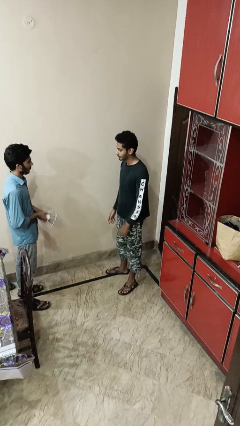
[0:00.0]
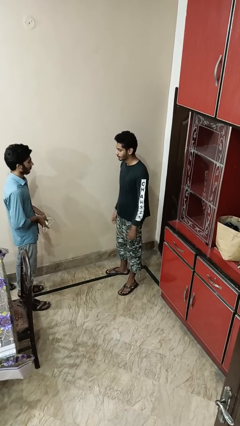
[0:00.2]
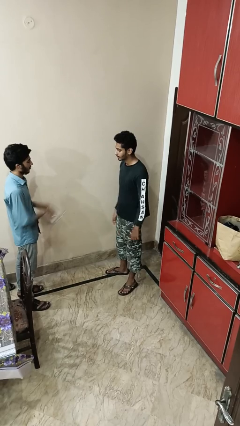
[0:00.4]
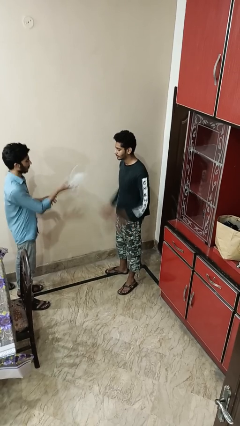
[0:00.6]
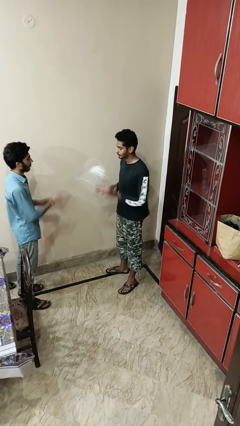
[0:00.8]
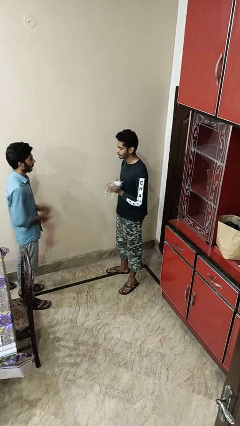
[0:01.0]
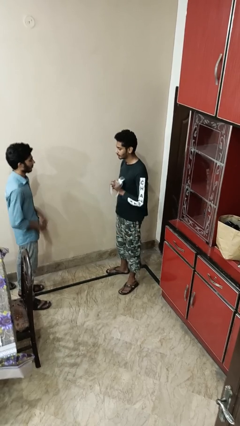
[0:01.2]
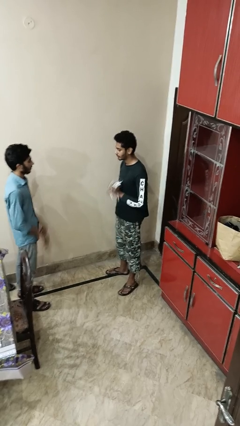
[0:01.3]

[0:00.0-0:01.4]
person catches object from person

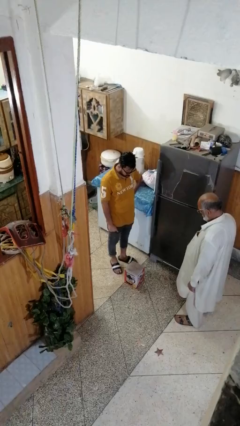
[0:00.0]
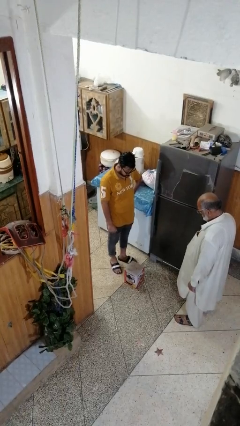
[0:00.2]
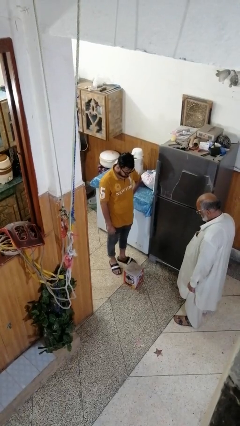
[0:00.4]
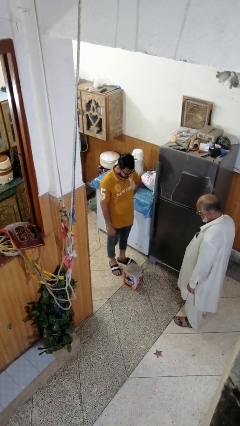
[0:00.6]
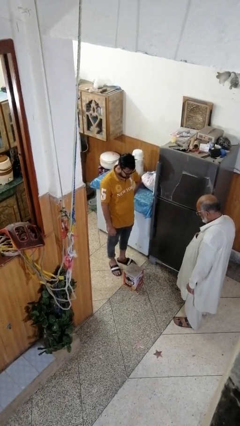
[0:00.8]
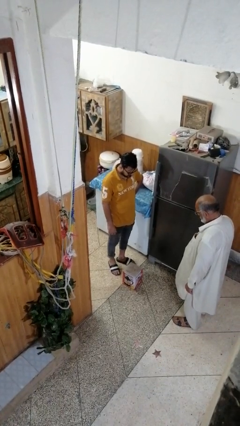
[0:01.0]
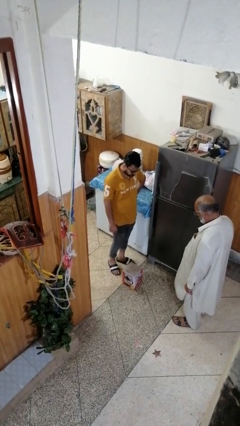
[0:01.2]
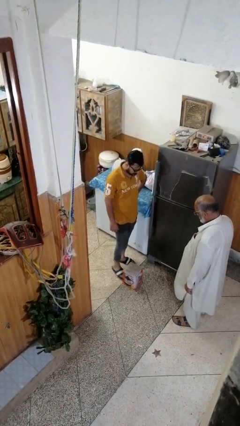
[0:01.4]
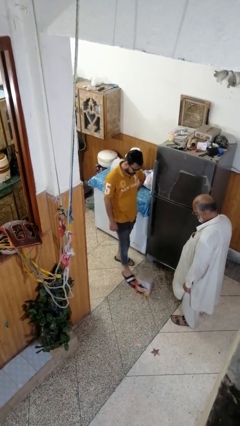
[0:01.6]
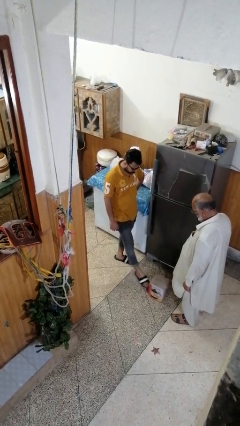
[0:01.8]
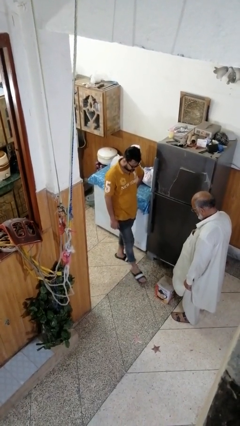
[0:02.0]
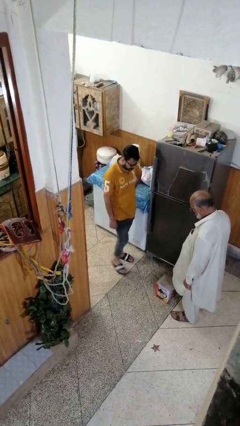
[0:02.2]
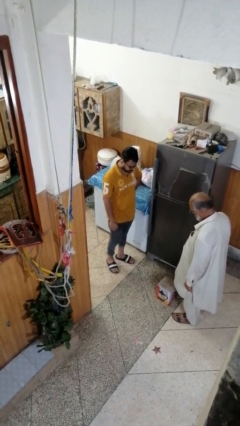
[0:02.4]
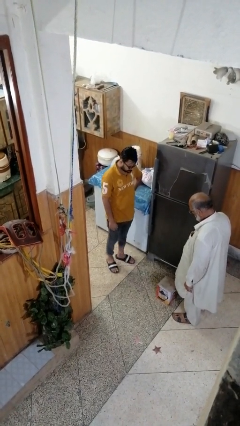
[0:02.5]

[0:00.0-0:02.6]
person kicks object to person

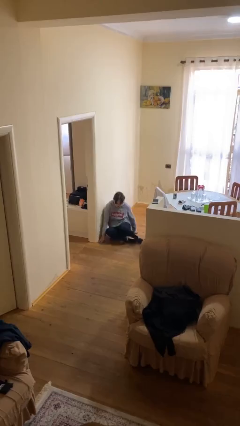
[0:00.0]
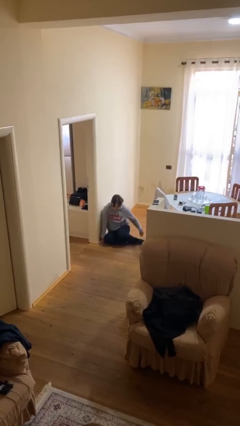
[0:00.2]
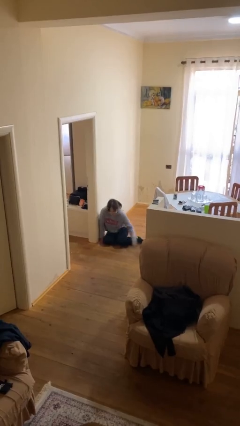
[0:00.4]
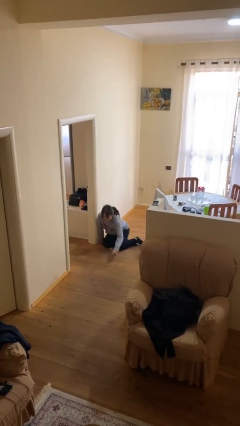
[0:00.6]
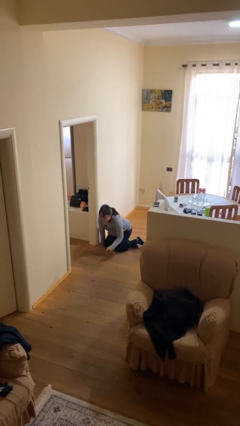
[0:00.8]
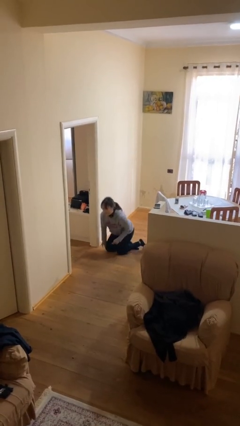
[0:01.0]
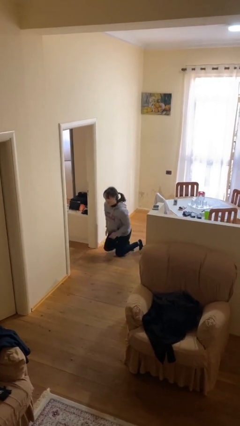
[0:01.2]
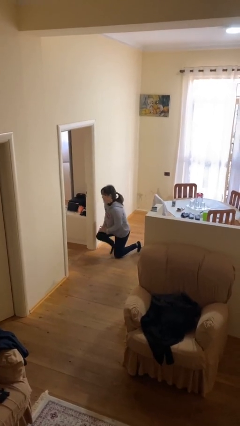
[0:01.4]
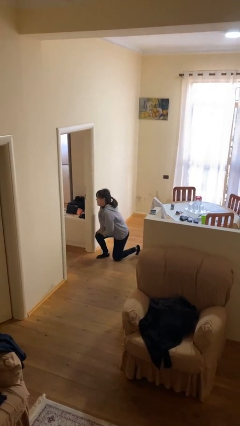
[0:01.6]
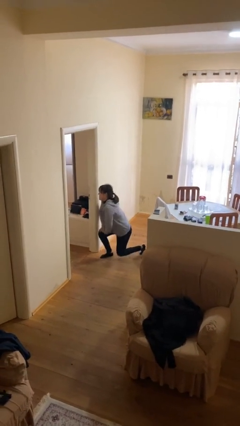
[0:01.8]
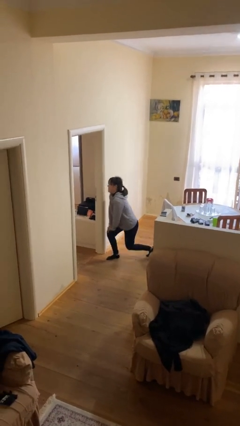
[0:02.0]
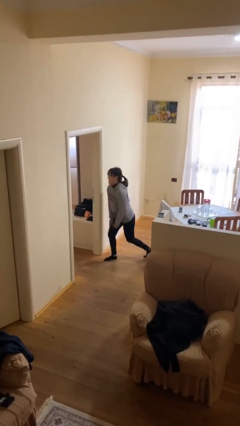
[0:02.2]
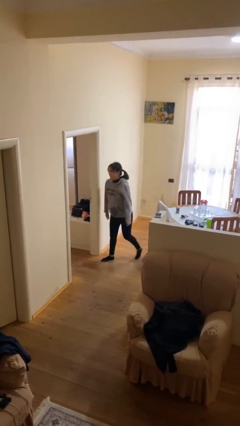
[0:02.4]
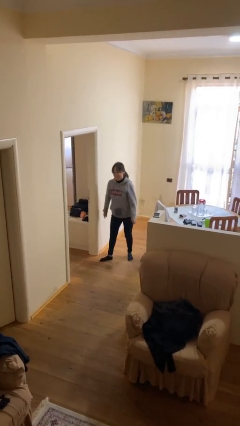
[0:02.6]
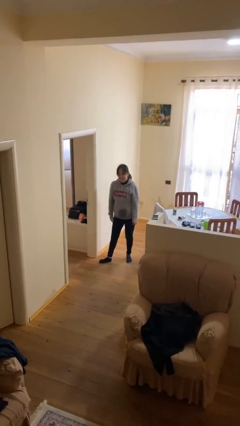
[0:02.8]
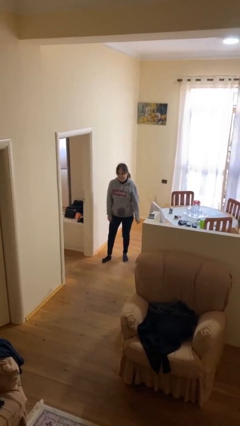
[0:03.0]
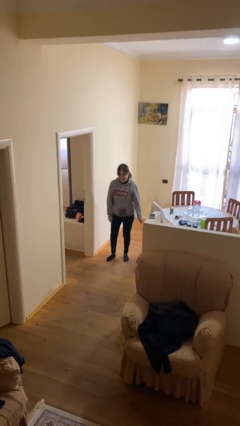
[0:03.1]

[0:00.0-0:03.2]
person stands up

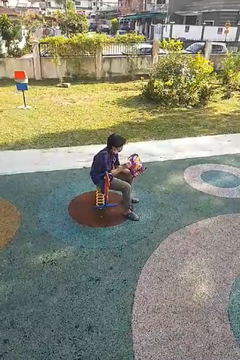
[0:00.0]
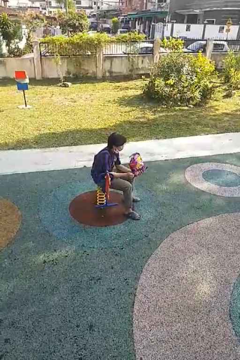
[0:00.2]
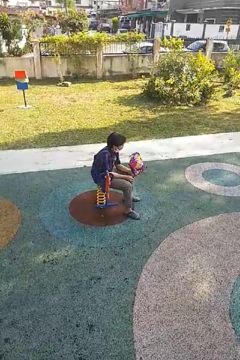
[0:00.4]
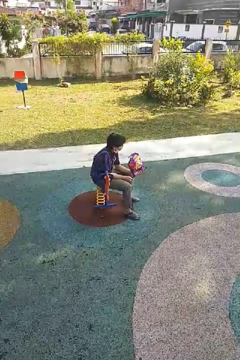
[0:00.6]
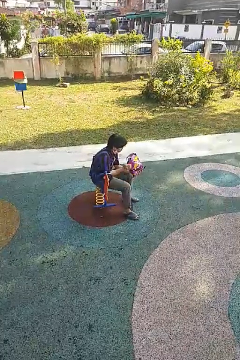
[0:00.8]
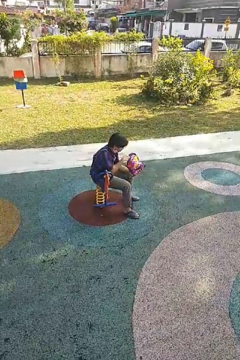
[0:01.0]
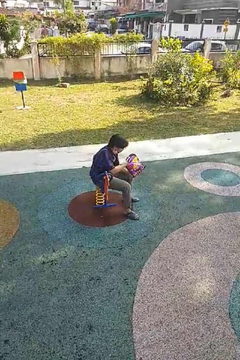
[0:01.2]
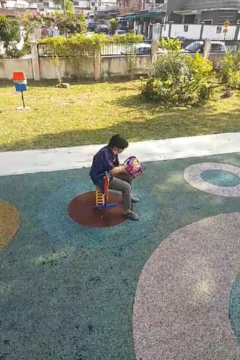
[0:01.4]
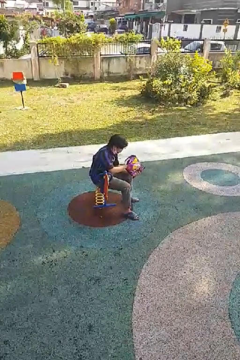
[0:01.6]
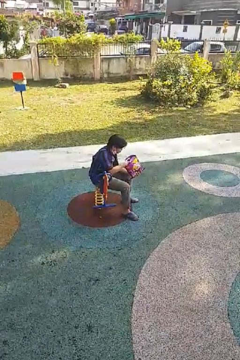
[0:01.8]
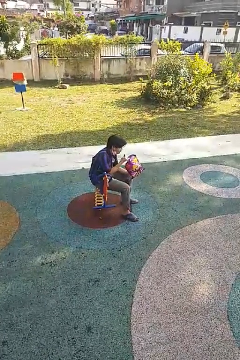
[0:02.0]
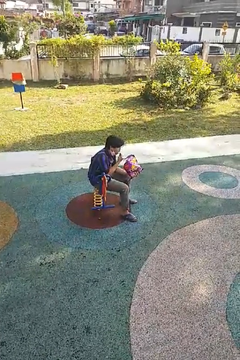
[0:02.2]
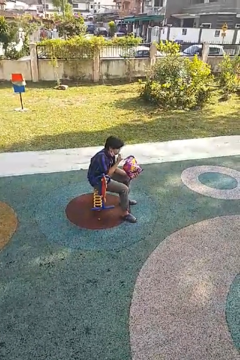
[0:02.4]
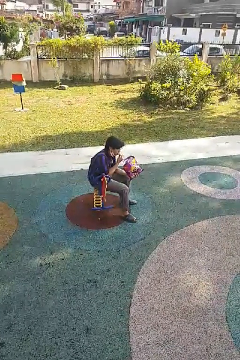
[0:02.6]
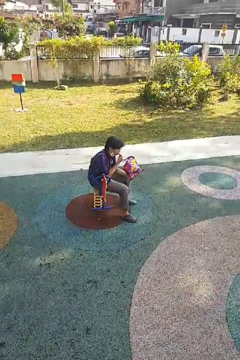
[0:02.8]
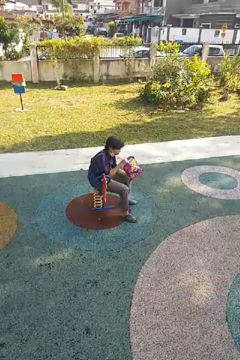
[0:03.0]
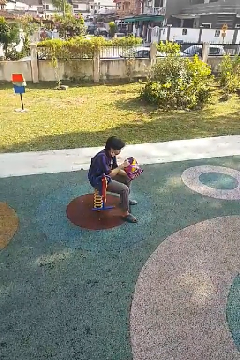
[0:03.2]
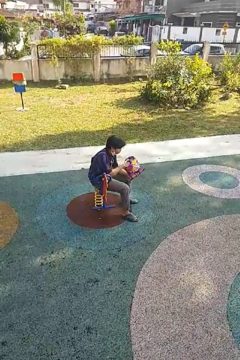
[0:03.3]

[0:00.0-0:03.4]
person eats snack from bag

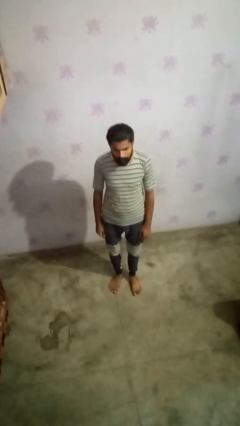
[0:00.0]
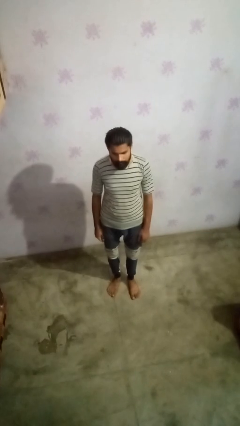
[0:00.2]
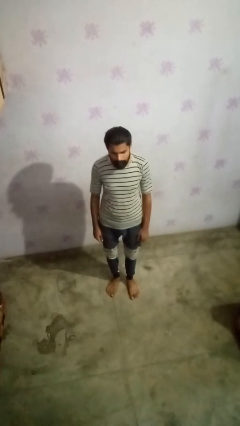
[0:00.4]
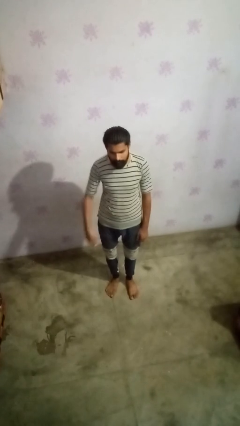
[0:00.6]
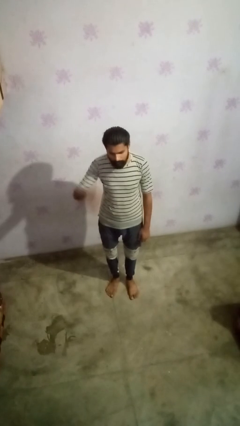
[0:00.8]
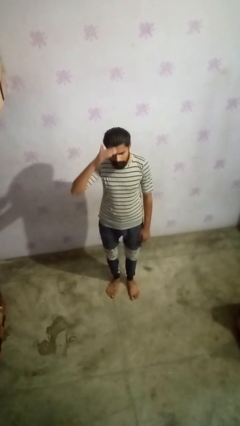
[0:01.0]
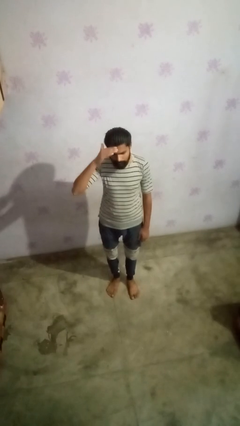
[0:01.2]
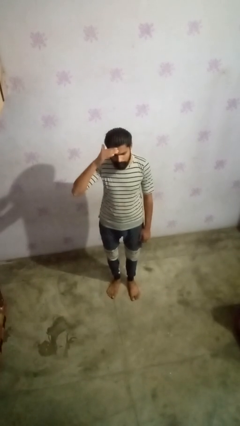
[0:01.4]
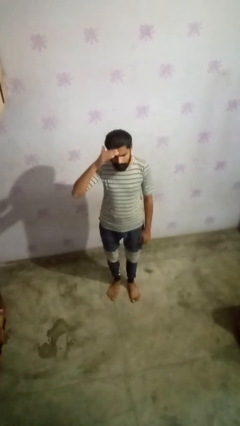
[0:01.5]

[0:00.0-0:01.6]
person salutes

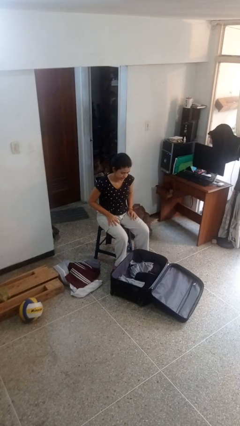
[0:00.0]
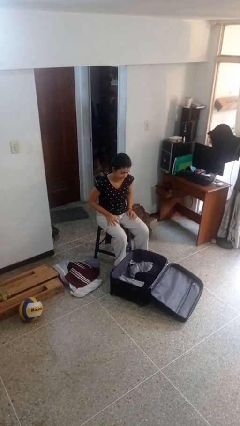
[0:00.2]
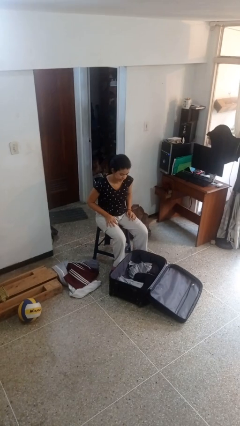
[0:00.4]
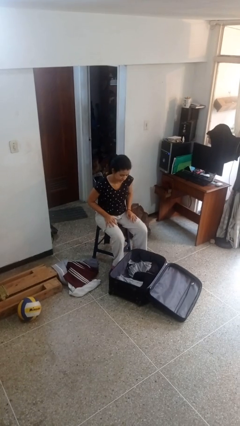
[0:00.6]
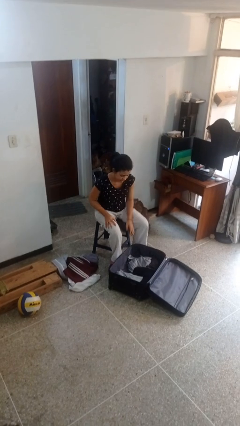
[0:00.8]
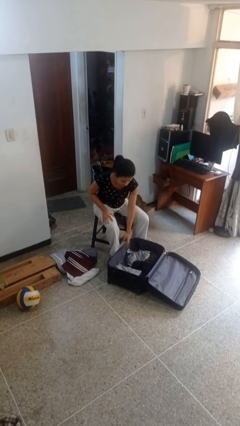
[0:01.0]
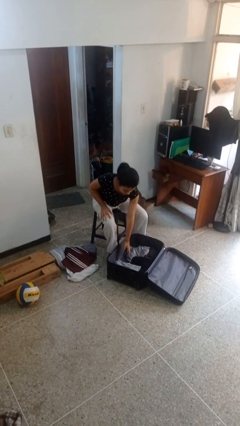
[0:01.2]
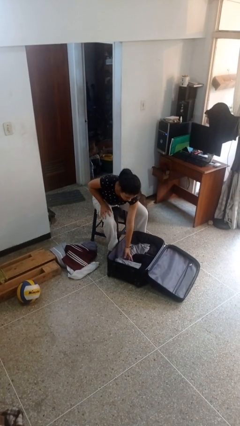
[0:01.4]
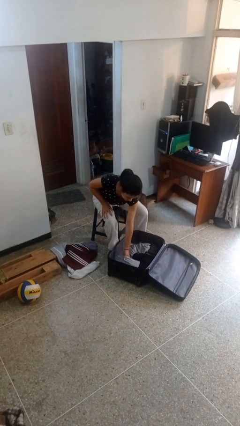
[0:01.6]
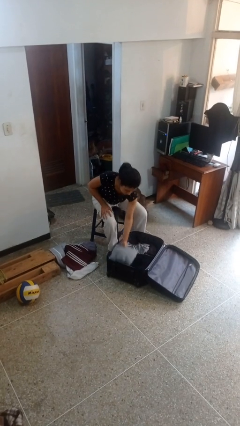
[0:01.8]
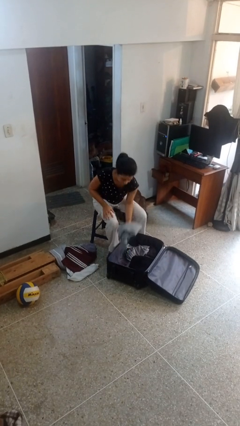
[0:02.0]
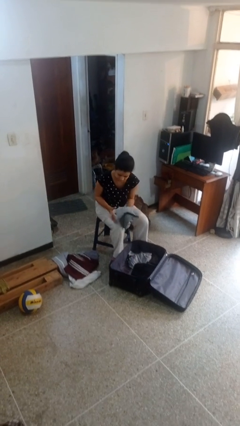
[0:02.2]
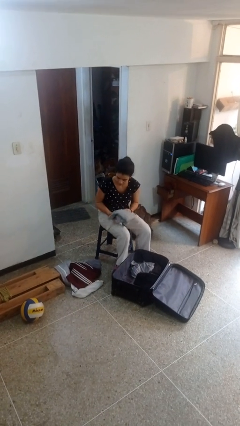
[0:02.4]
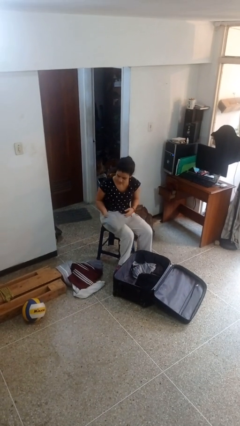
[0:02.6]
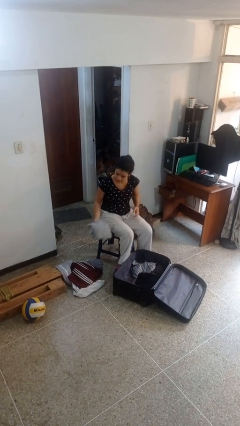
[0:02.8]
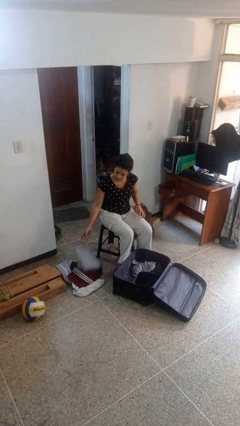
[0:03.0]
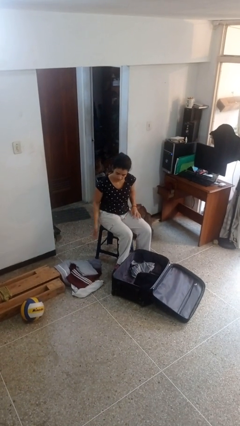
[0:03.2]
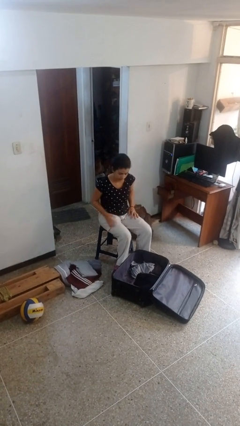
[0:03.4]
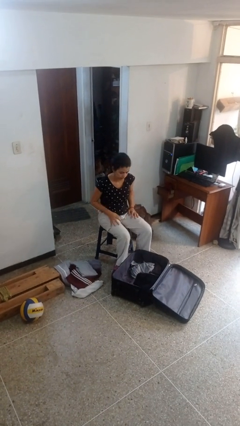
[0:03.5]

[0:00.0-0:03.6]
person unloads clothes from suitcase

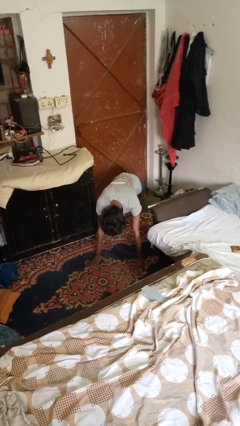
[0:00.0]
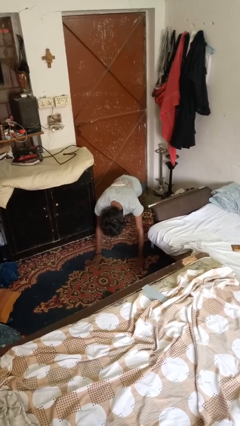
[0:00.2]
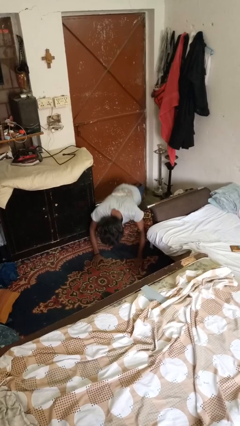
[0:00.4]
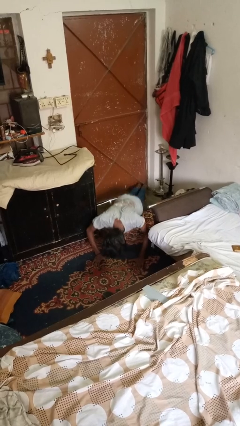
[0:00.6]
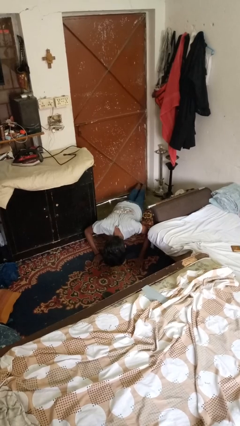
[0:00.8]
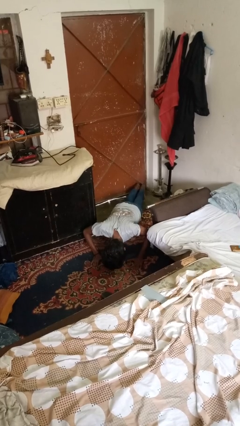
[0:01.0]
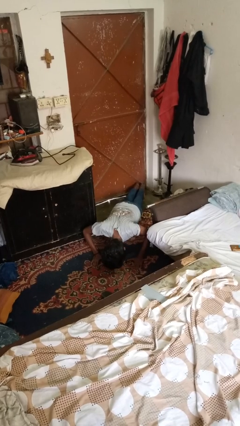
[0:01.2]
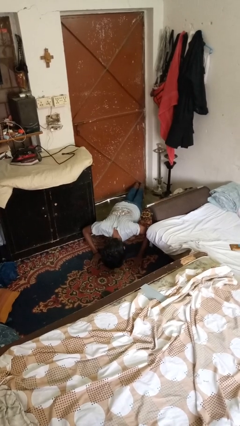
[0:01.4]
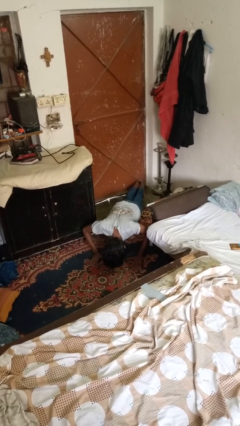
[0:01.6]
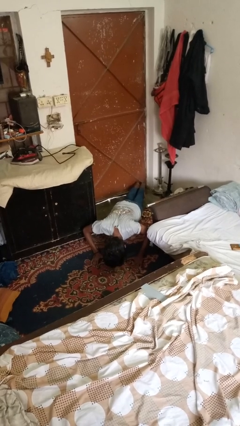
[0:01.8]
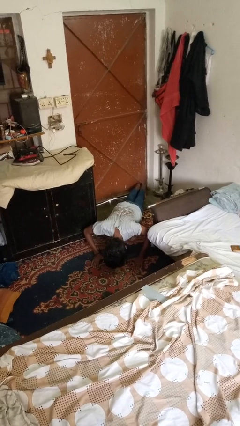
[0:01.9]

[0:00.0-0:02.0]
person exercises with pushup
